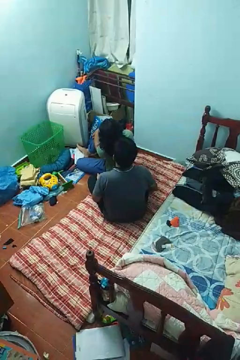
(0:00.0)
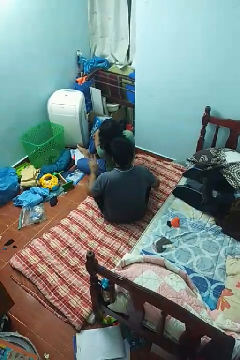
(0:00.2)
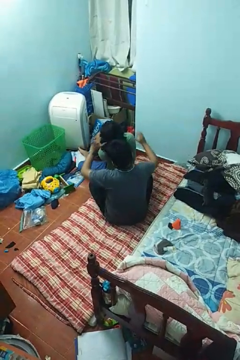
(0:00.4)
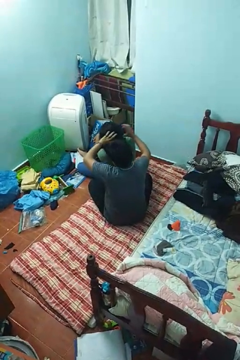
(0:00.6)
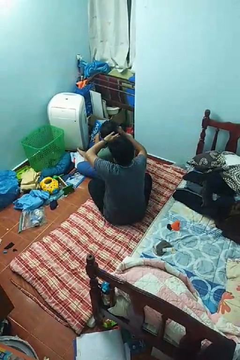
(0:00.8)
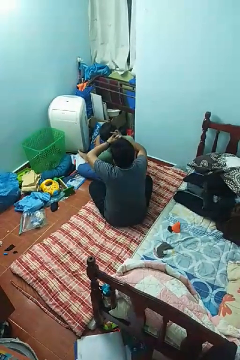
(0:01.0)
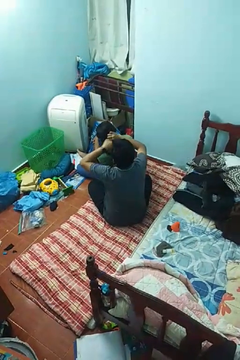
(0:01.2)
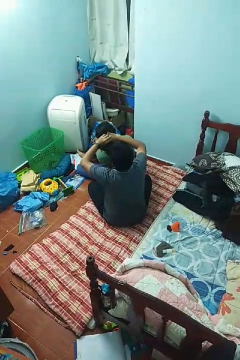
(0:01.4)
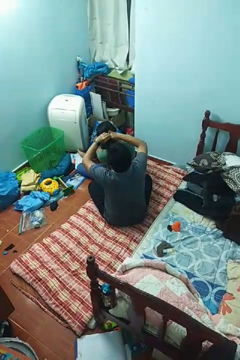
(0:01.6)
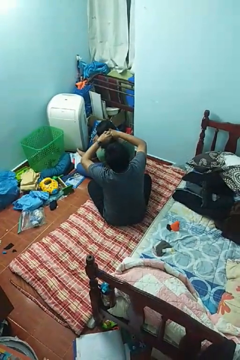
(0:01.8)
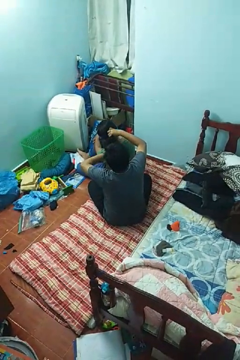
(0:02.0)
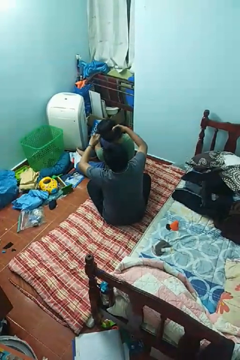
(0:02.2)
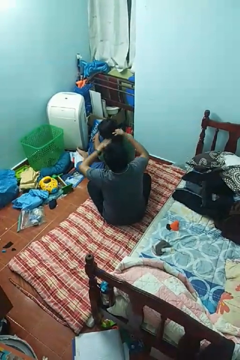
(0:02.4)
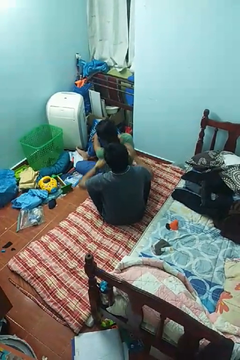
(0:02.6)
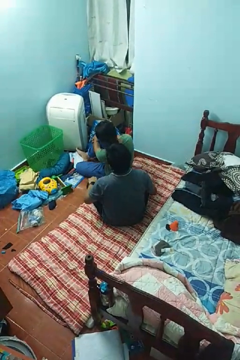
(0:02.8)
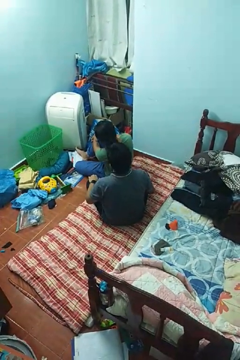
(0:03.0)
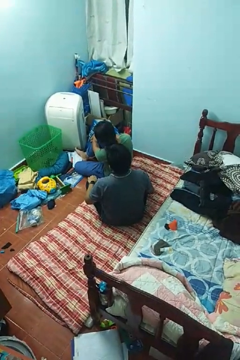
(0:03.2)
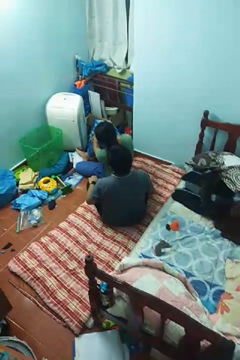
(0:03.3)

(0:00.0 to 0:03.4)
person braids hair of person

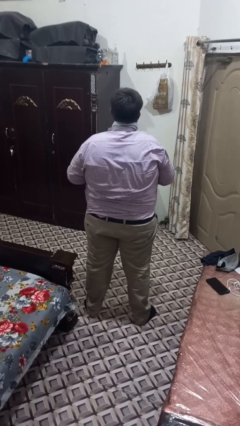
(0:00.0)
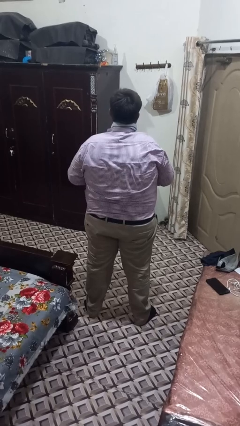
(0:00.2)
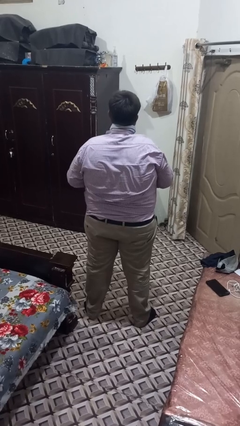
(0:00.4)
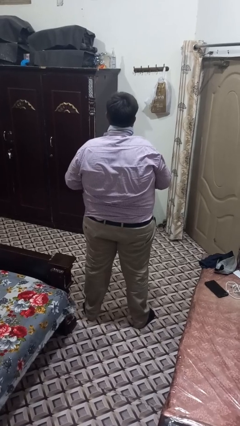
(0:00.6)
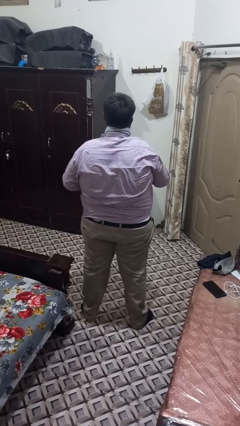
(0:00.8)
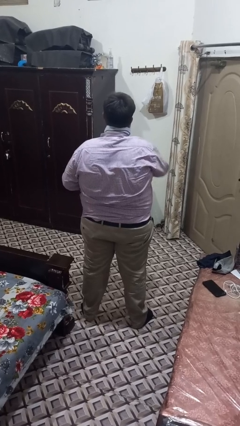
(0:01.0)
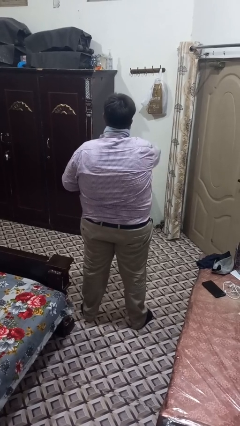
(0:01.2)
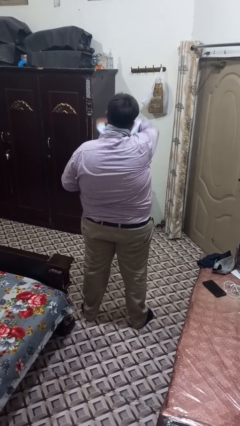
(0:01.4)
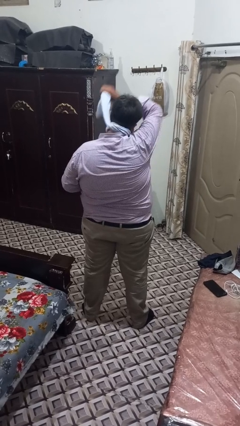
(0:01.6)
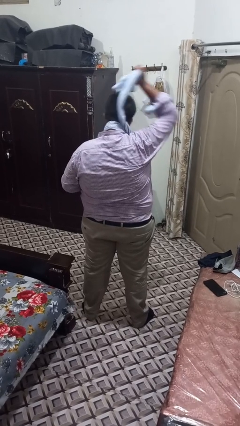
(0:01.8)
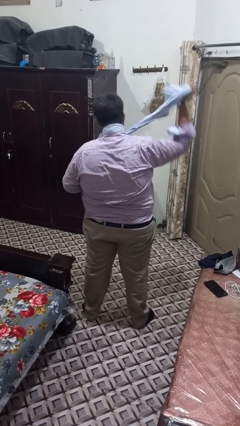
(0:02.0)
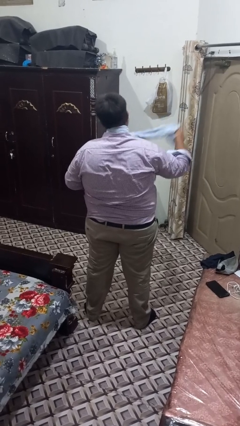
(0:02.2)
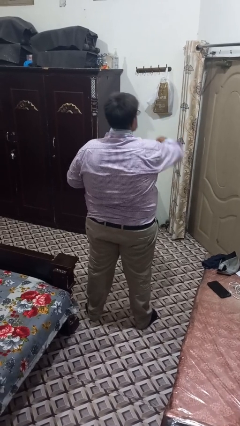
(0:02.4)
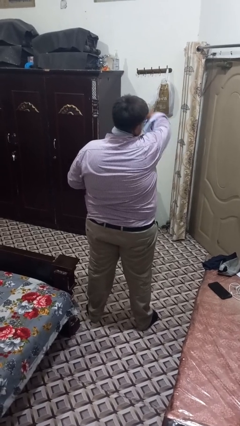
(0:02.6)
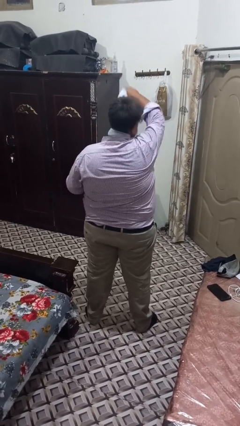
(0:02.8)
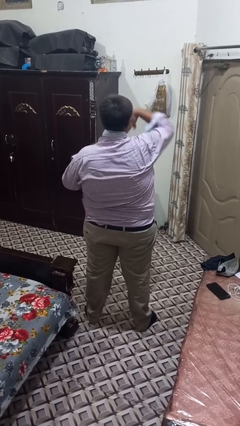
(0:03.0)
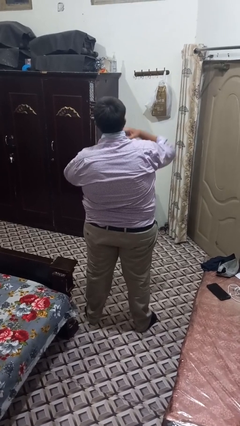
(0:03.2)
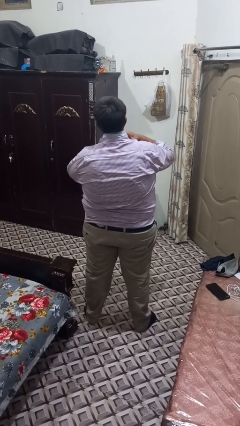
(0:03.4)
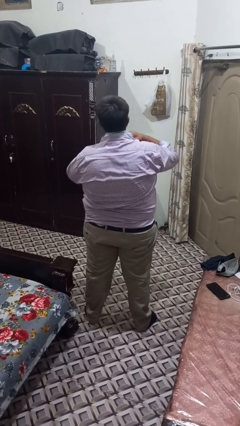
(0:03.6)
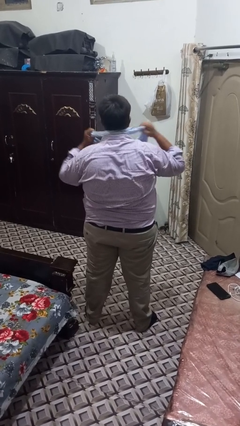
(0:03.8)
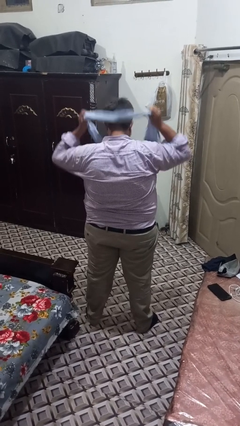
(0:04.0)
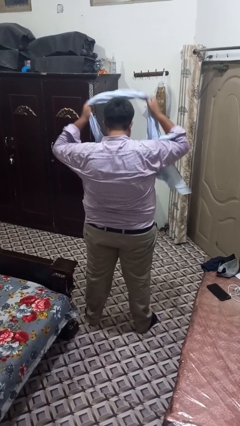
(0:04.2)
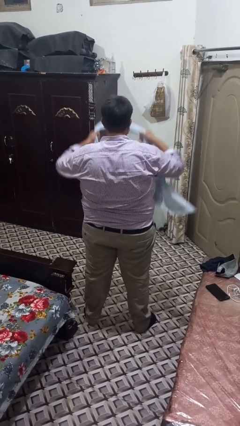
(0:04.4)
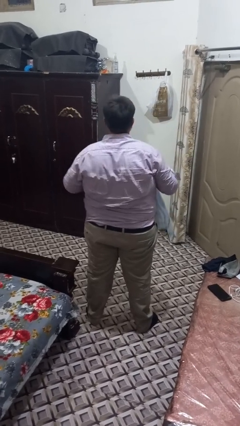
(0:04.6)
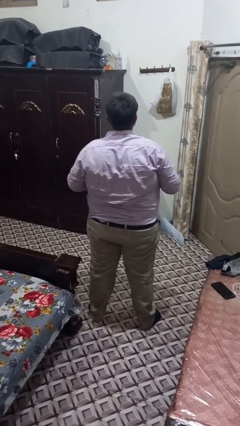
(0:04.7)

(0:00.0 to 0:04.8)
person takes off scarf

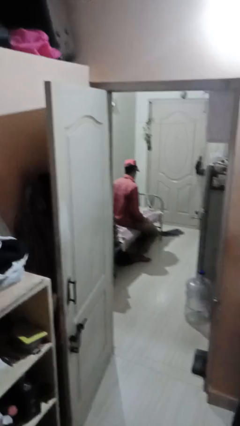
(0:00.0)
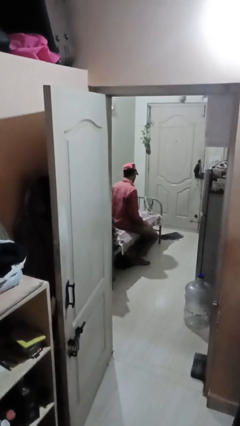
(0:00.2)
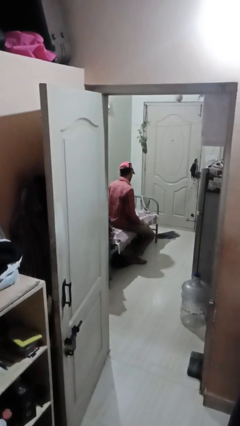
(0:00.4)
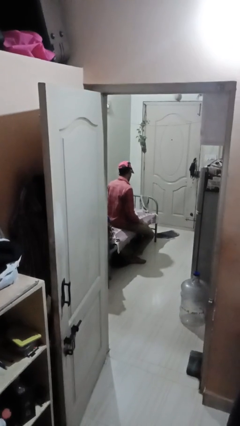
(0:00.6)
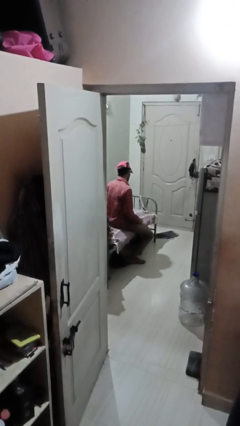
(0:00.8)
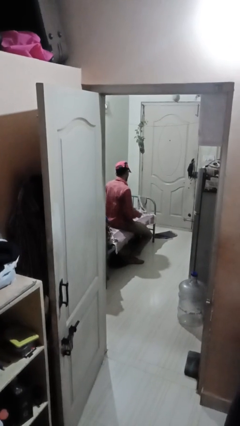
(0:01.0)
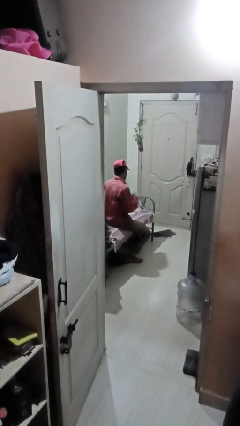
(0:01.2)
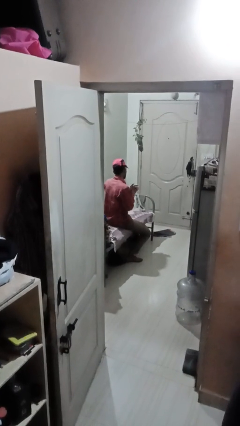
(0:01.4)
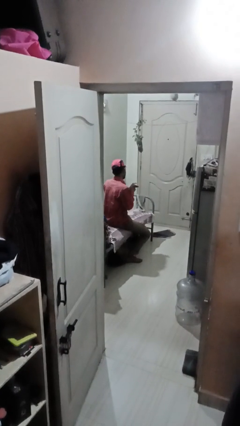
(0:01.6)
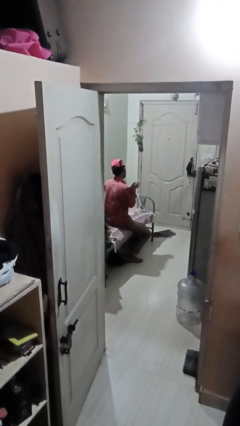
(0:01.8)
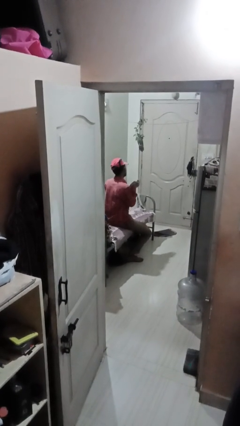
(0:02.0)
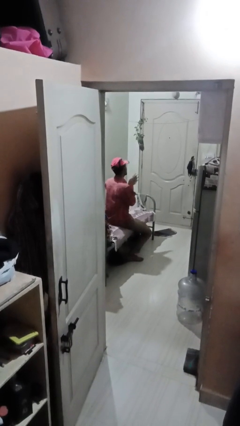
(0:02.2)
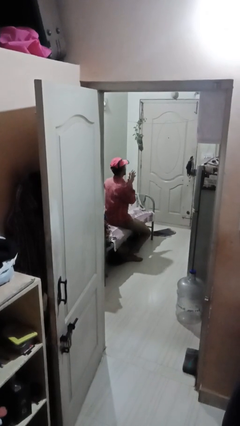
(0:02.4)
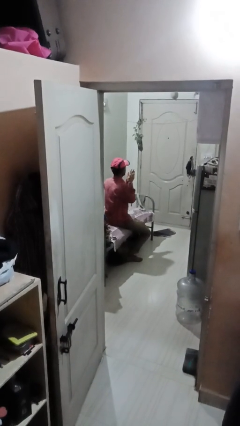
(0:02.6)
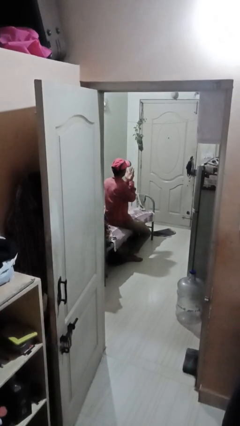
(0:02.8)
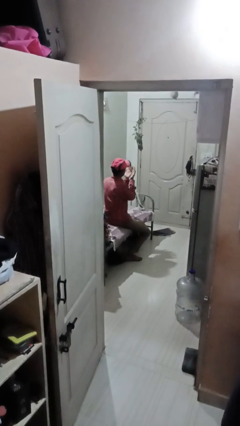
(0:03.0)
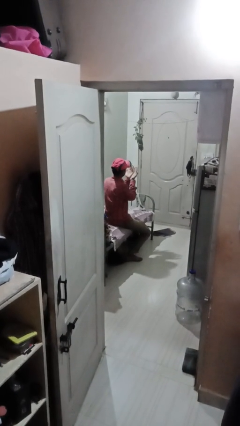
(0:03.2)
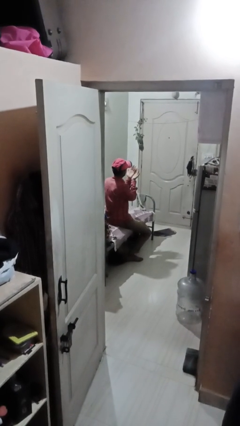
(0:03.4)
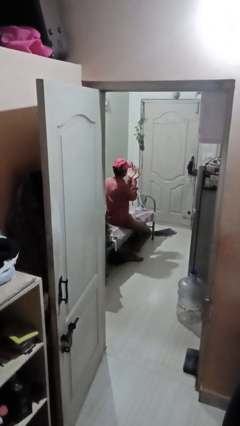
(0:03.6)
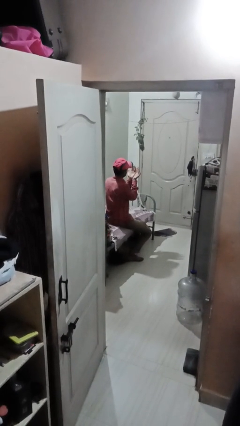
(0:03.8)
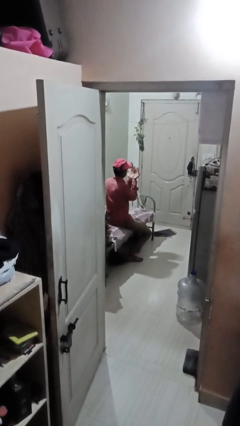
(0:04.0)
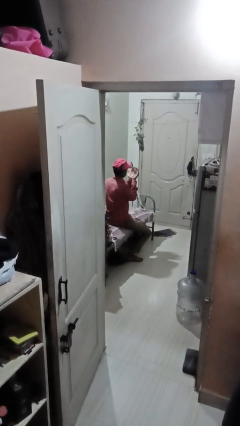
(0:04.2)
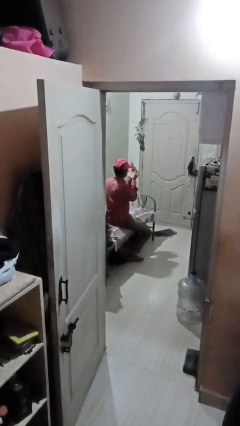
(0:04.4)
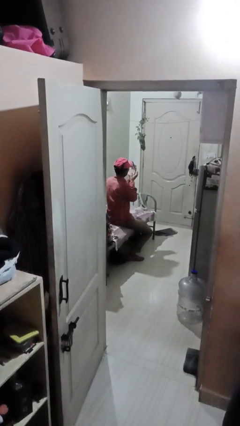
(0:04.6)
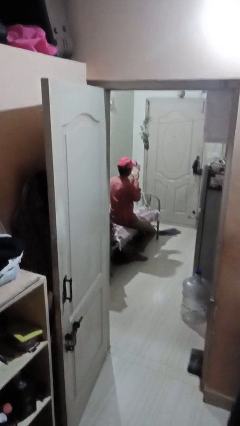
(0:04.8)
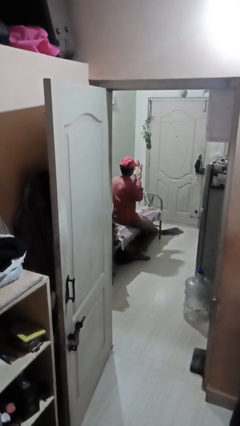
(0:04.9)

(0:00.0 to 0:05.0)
person looks at hands in lap

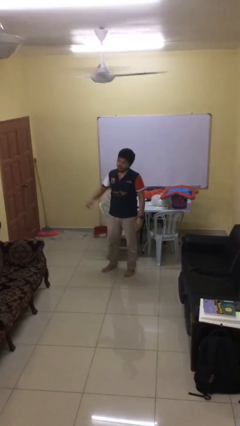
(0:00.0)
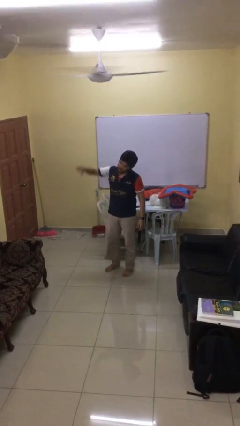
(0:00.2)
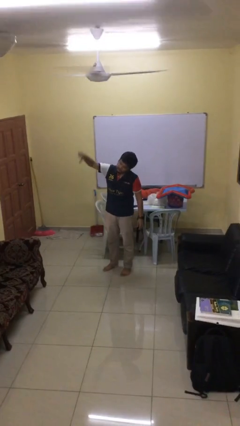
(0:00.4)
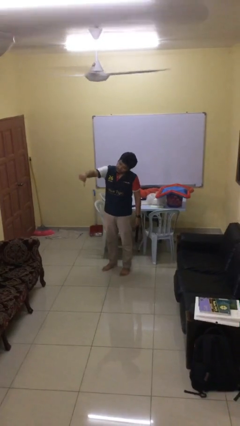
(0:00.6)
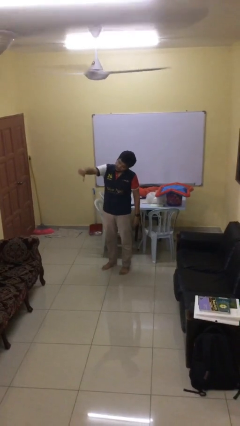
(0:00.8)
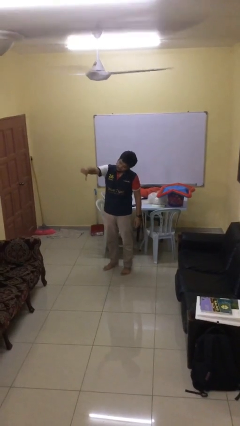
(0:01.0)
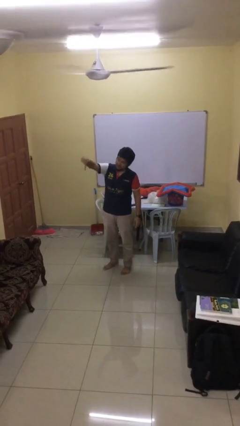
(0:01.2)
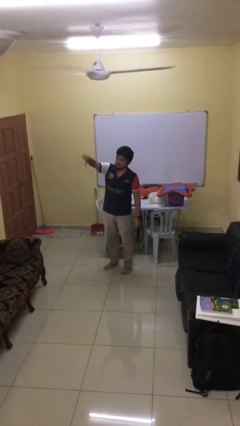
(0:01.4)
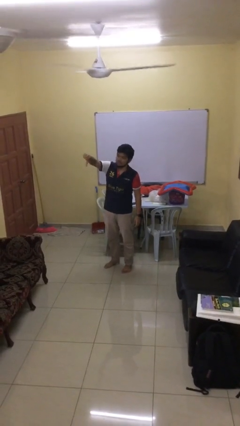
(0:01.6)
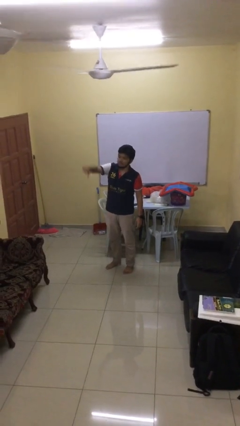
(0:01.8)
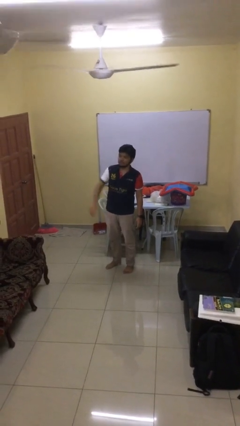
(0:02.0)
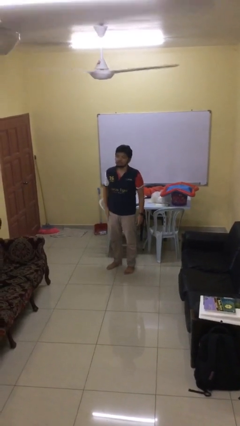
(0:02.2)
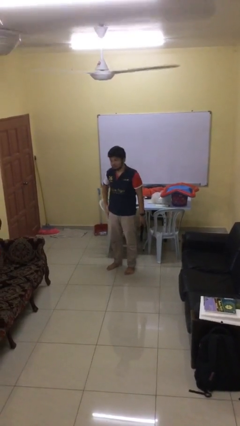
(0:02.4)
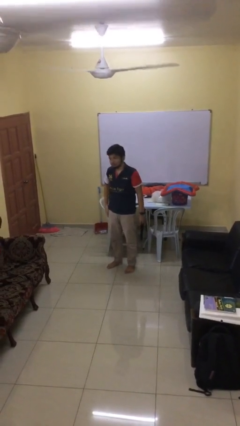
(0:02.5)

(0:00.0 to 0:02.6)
person gestures thumbs down

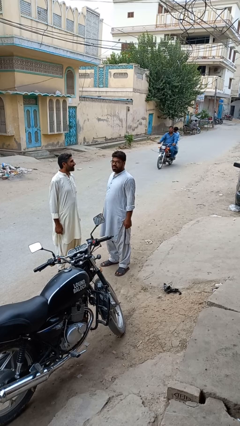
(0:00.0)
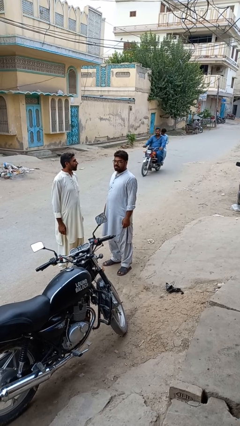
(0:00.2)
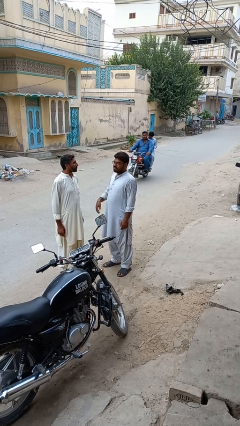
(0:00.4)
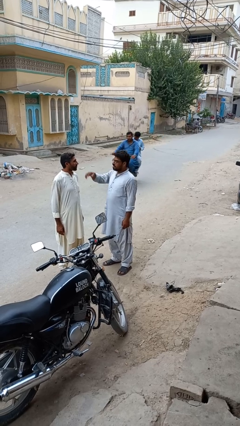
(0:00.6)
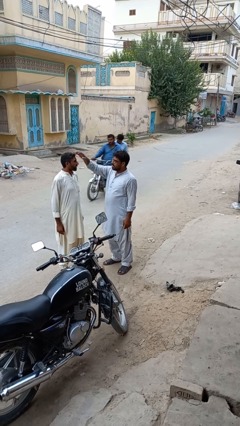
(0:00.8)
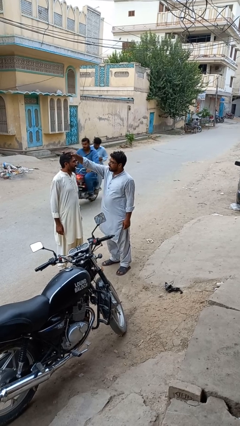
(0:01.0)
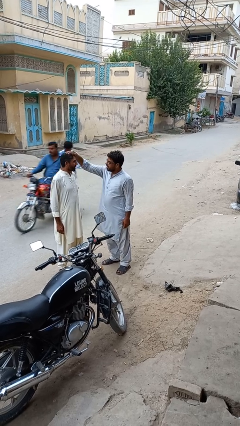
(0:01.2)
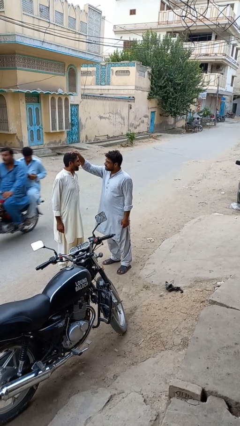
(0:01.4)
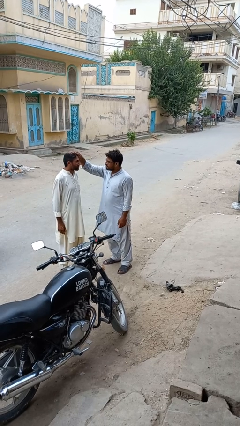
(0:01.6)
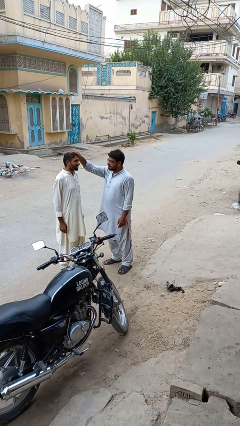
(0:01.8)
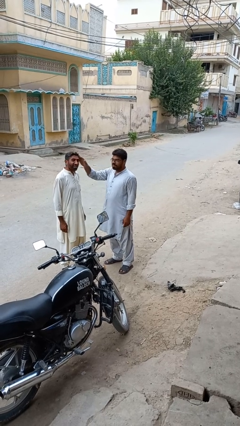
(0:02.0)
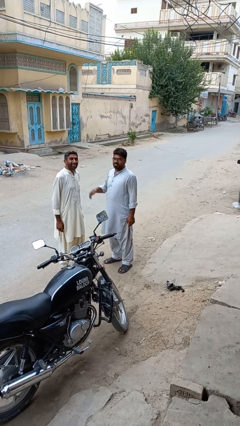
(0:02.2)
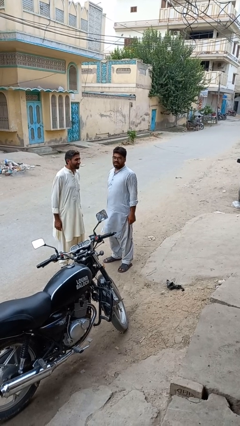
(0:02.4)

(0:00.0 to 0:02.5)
person grabs person by hair

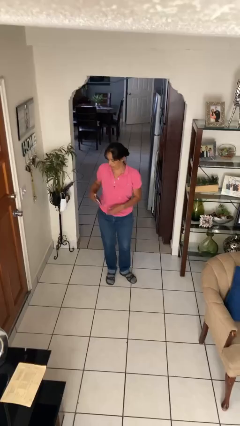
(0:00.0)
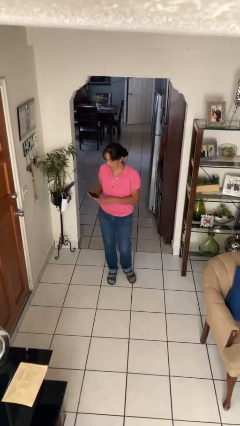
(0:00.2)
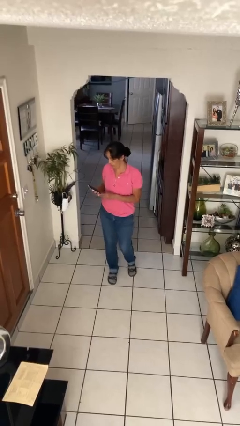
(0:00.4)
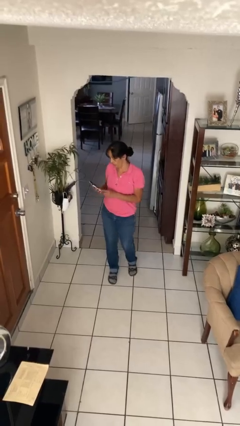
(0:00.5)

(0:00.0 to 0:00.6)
person takes phone from pocket
